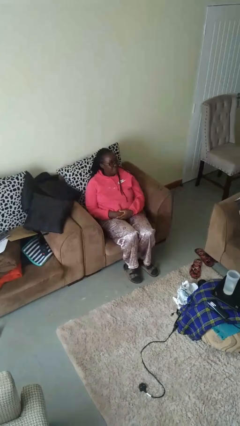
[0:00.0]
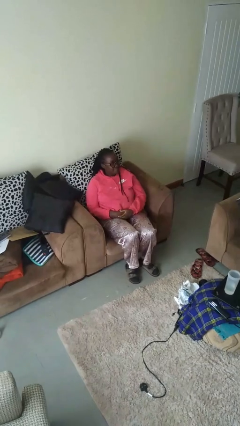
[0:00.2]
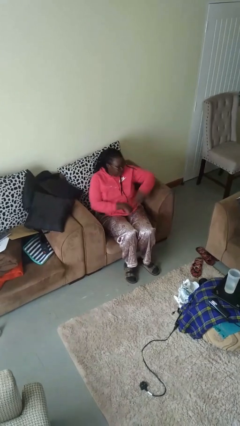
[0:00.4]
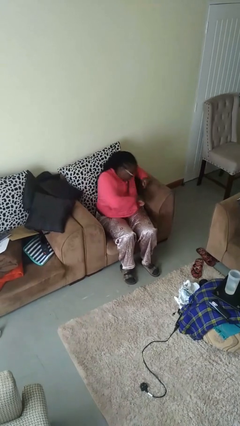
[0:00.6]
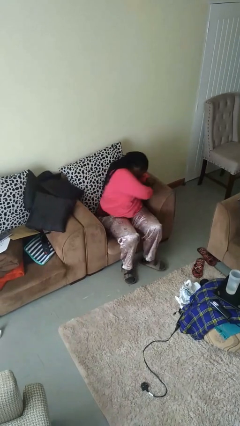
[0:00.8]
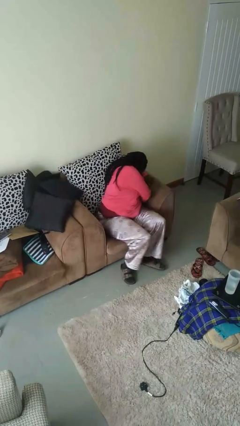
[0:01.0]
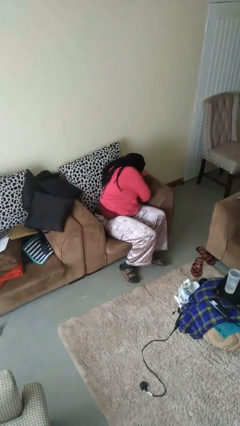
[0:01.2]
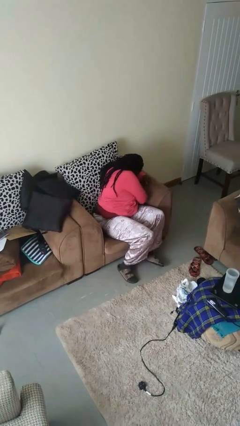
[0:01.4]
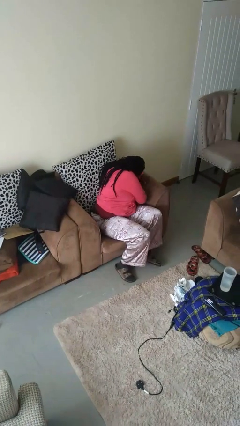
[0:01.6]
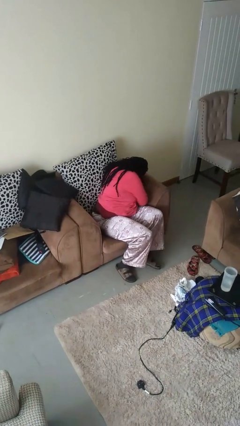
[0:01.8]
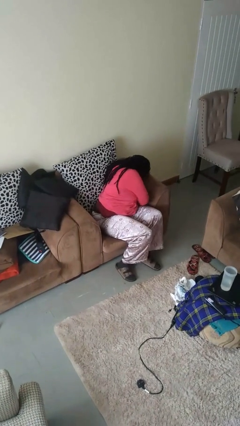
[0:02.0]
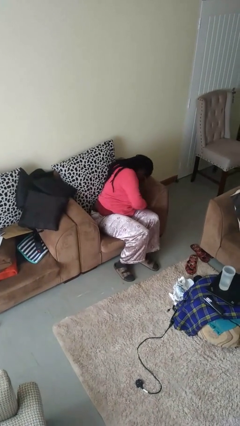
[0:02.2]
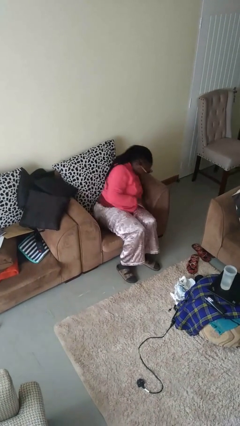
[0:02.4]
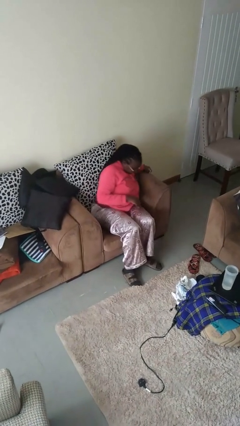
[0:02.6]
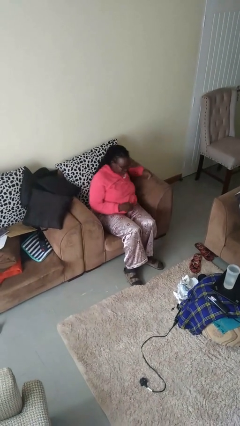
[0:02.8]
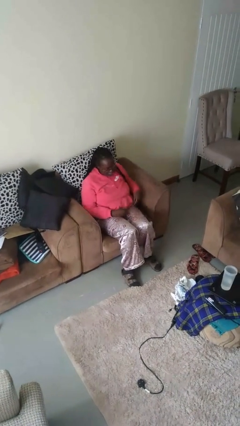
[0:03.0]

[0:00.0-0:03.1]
person searches in couch

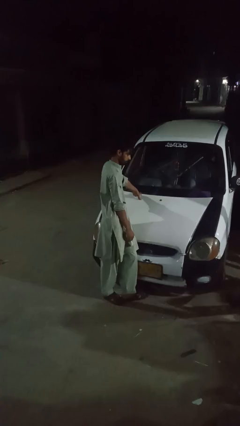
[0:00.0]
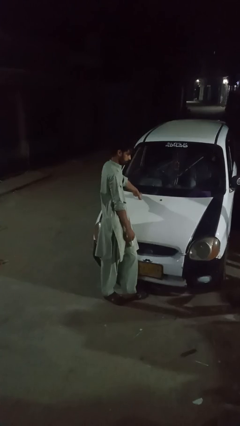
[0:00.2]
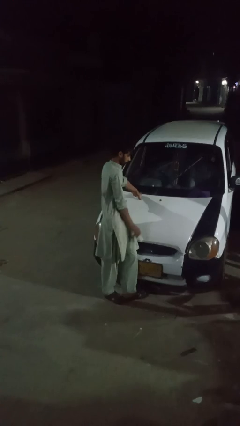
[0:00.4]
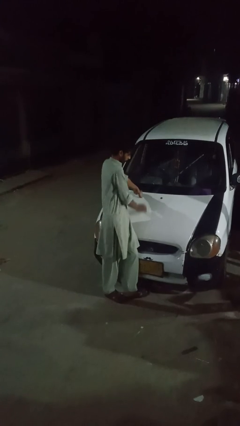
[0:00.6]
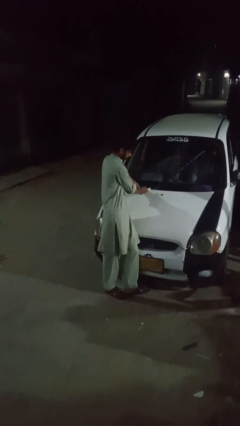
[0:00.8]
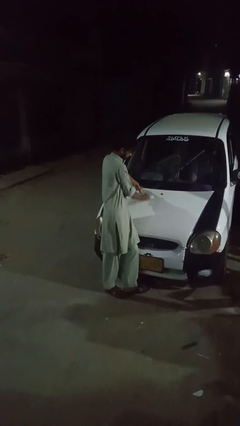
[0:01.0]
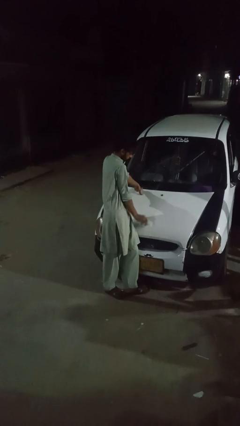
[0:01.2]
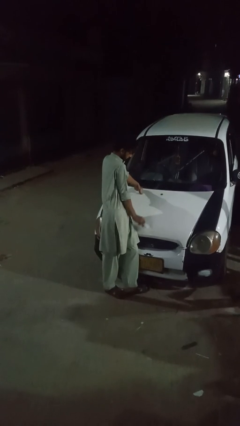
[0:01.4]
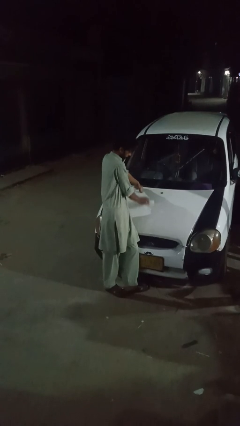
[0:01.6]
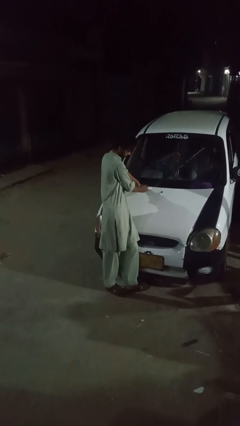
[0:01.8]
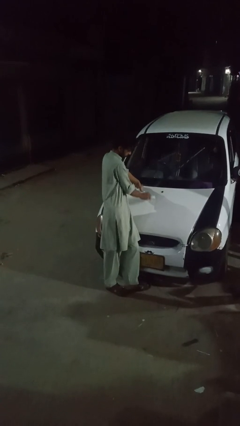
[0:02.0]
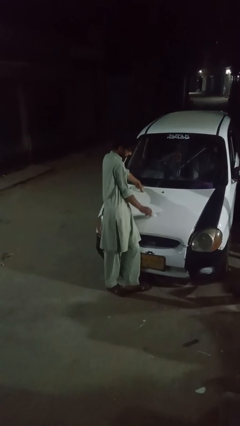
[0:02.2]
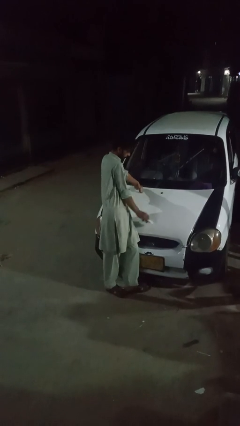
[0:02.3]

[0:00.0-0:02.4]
person polishes car with rag

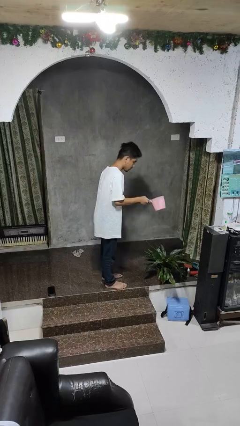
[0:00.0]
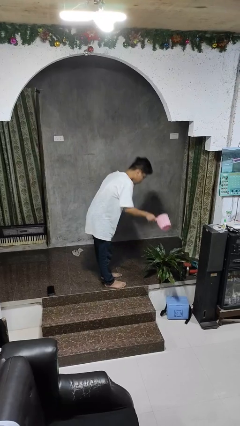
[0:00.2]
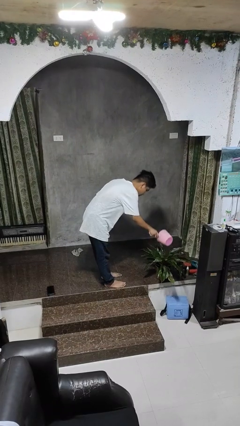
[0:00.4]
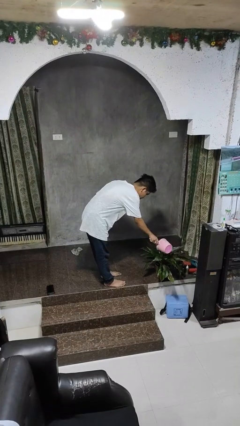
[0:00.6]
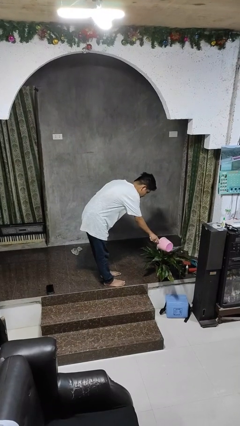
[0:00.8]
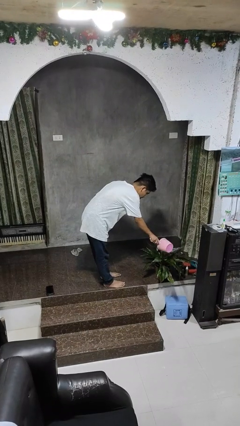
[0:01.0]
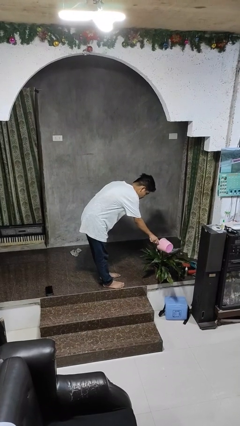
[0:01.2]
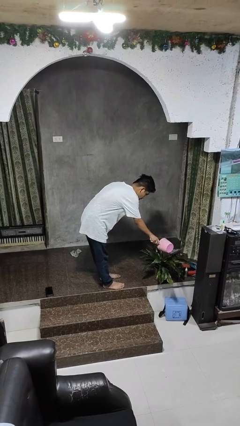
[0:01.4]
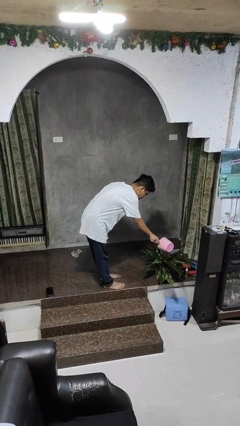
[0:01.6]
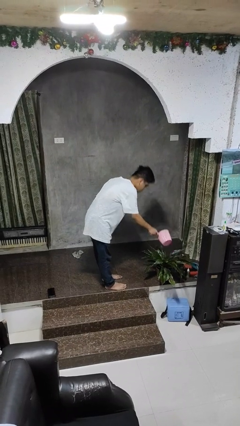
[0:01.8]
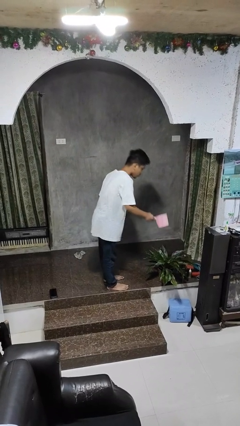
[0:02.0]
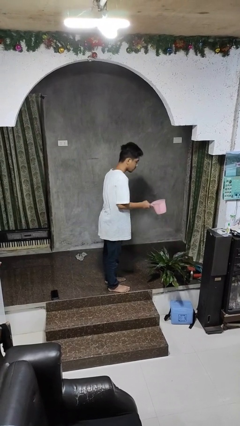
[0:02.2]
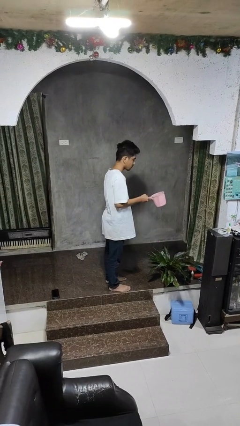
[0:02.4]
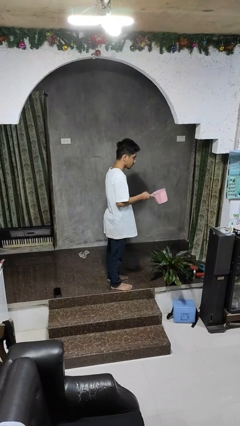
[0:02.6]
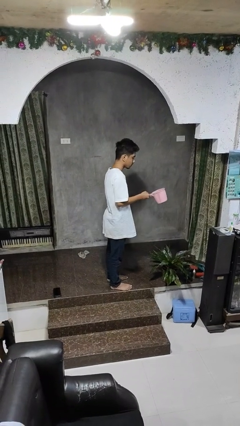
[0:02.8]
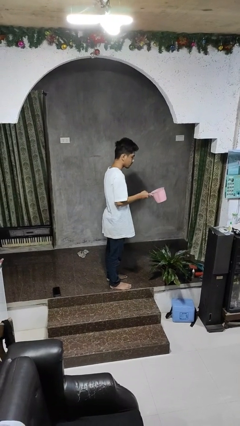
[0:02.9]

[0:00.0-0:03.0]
person waters houseplant

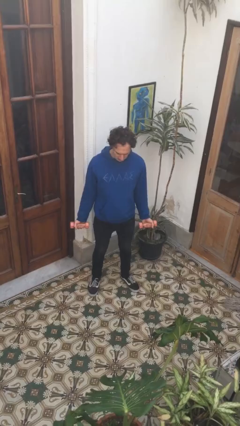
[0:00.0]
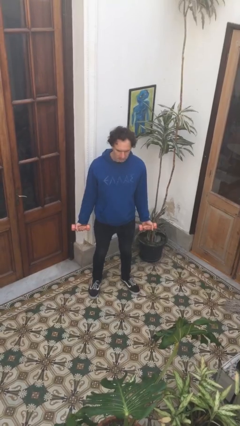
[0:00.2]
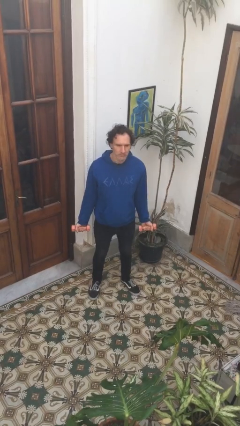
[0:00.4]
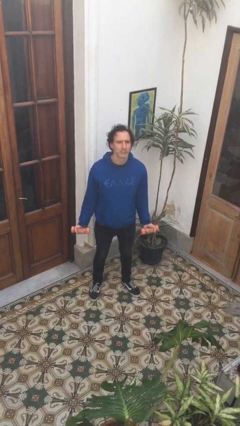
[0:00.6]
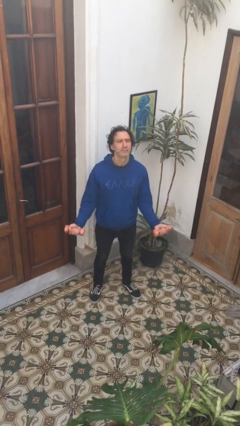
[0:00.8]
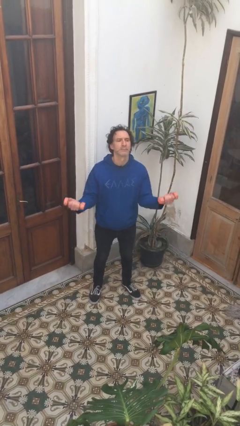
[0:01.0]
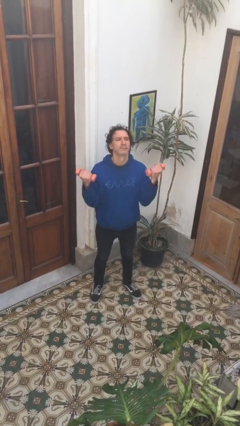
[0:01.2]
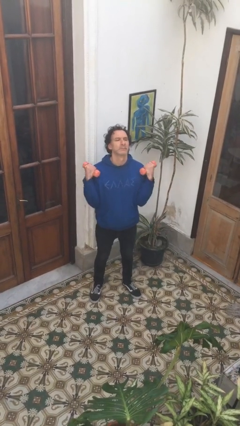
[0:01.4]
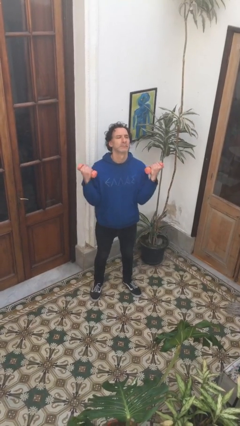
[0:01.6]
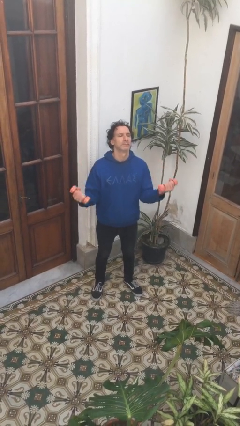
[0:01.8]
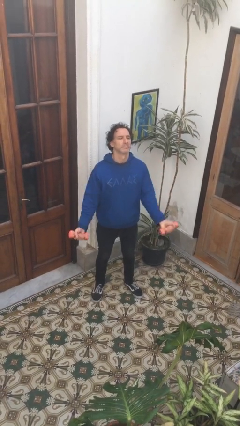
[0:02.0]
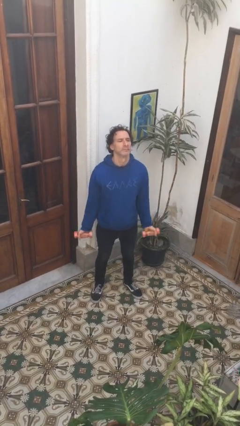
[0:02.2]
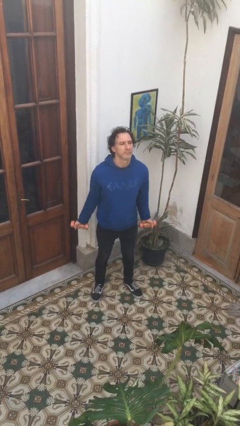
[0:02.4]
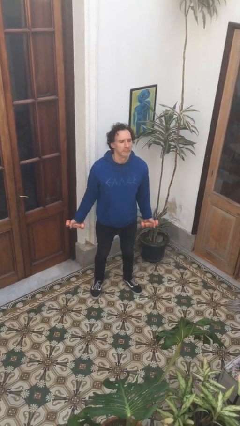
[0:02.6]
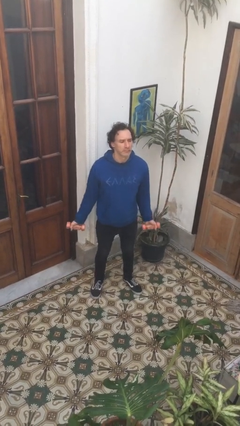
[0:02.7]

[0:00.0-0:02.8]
person lifts dumbbells

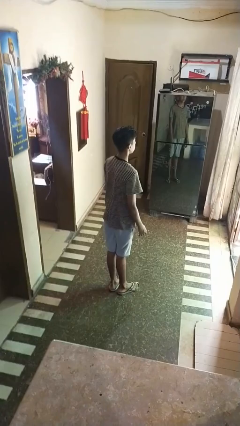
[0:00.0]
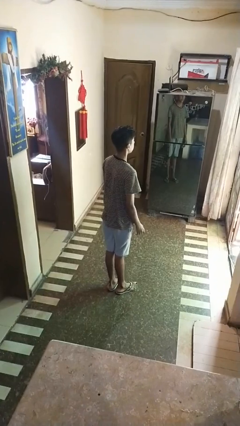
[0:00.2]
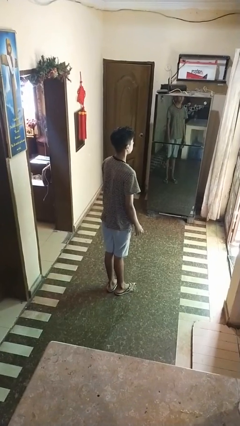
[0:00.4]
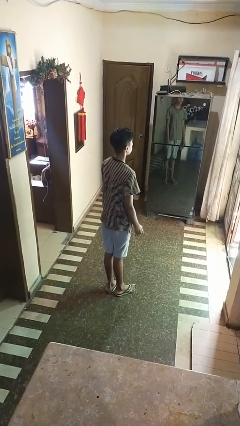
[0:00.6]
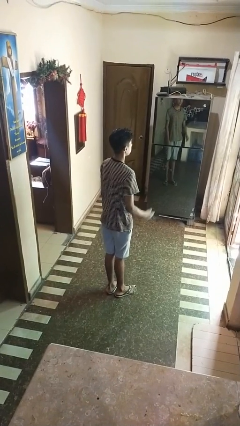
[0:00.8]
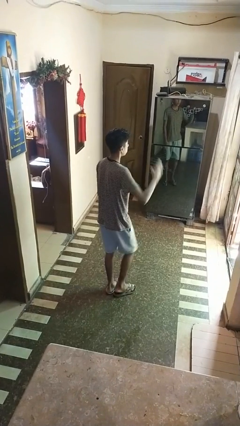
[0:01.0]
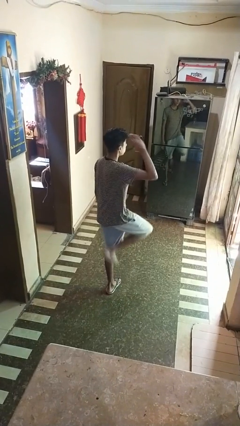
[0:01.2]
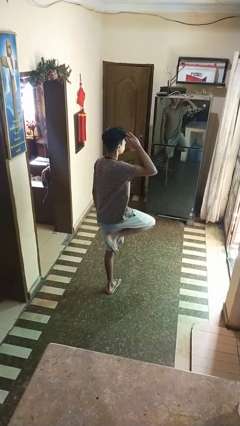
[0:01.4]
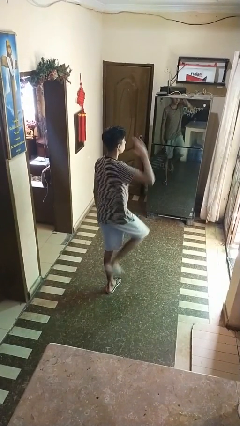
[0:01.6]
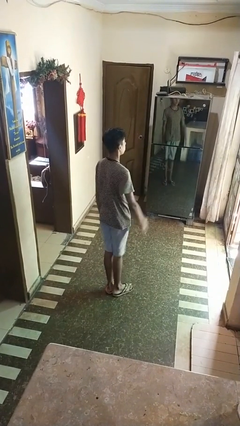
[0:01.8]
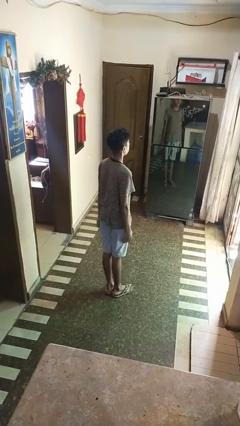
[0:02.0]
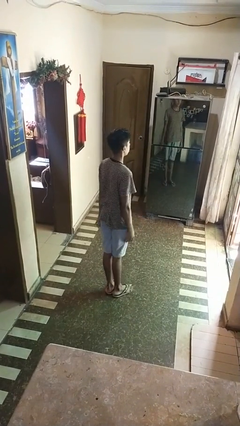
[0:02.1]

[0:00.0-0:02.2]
person salutes

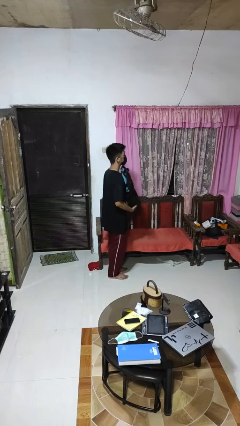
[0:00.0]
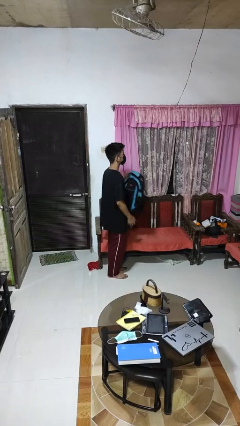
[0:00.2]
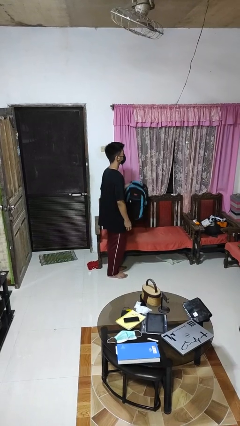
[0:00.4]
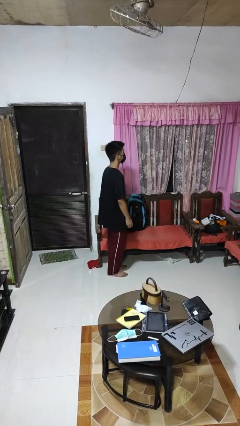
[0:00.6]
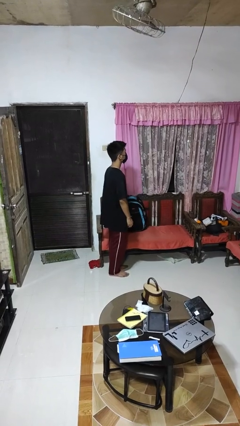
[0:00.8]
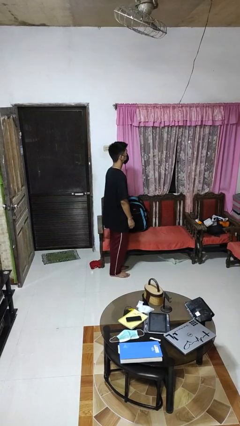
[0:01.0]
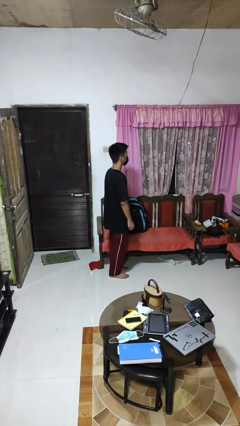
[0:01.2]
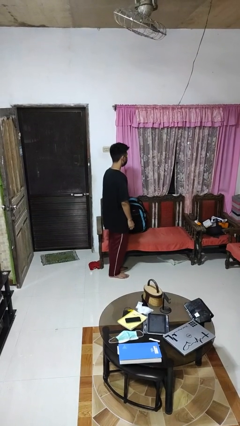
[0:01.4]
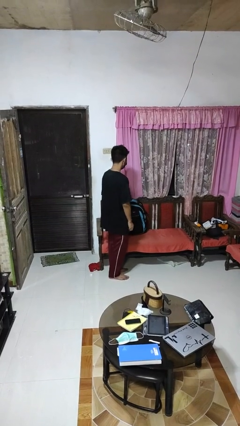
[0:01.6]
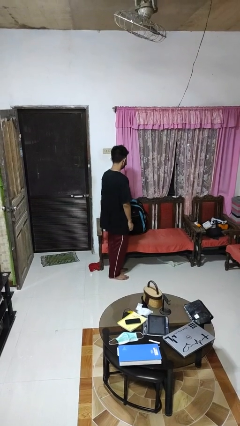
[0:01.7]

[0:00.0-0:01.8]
person puts down object on couch

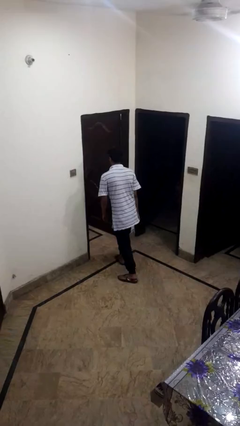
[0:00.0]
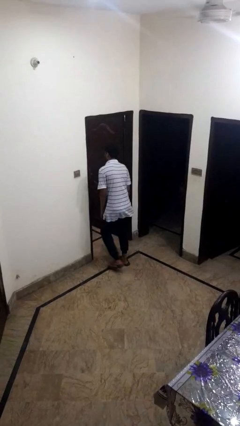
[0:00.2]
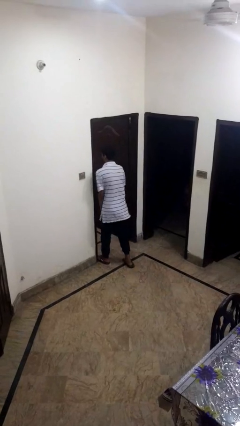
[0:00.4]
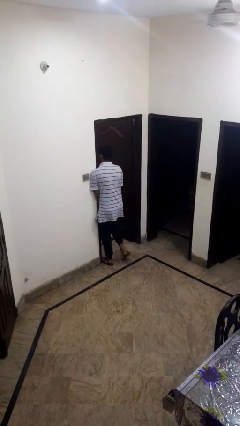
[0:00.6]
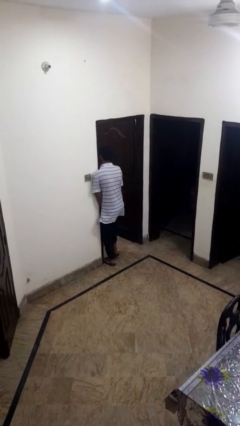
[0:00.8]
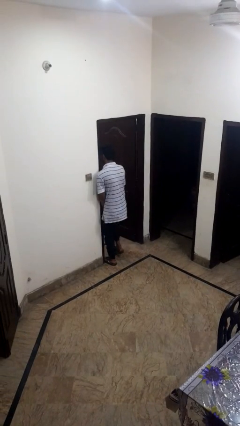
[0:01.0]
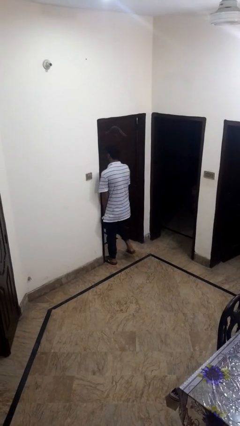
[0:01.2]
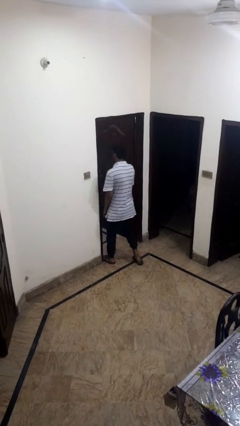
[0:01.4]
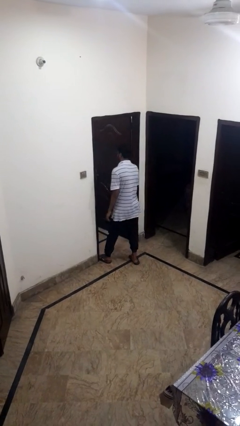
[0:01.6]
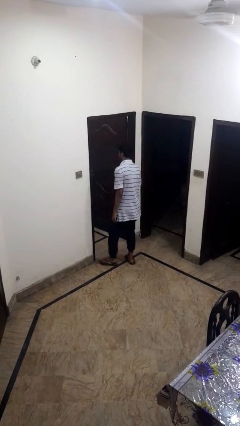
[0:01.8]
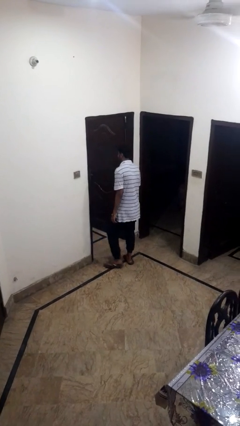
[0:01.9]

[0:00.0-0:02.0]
person bumps into wall
